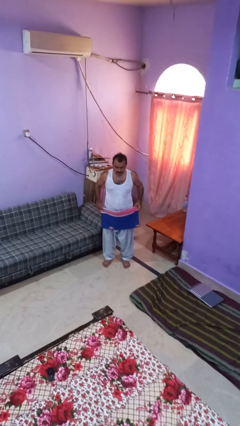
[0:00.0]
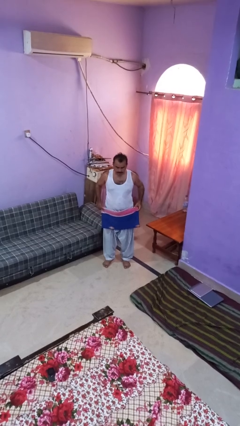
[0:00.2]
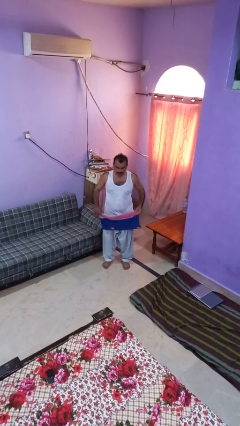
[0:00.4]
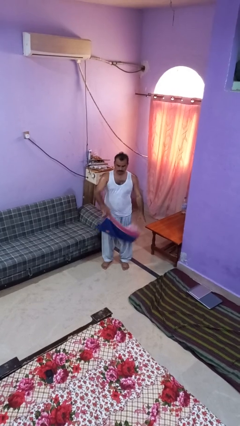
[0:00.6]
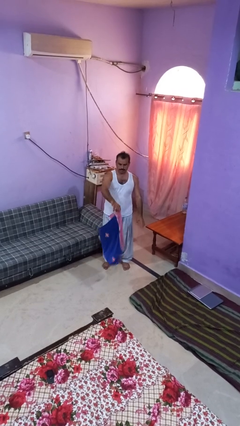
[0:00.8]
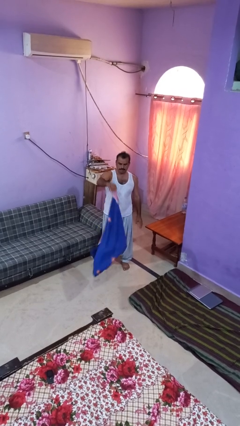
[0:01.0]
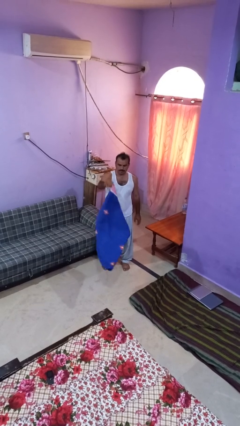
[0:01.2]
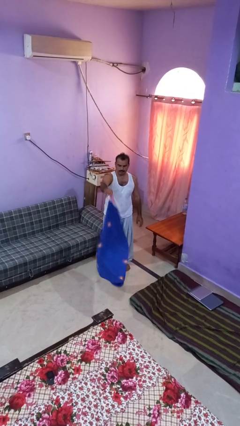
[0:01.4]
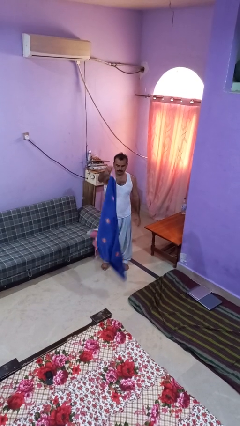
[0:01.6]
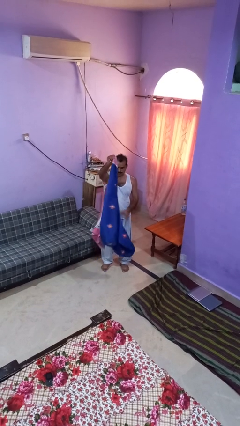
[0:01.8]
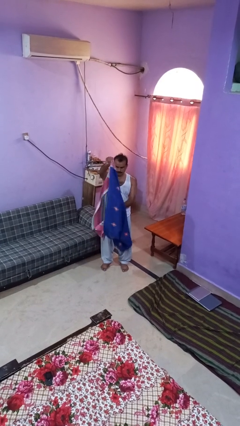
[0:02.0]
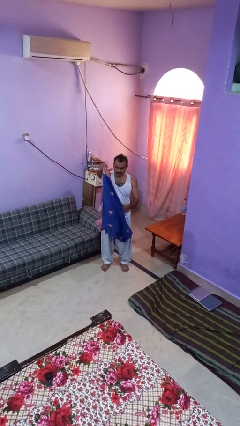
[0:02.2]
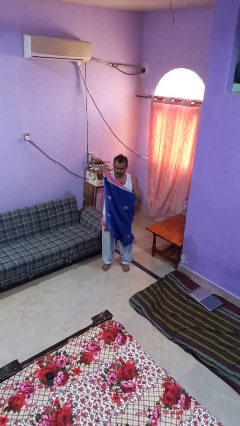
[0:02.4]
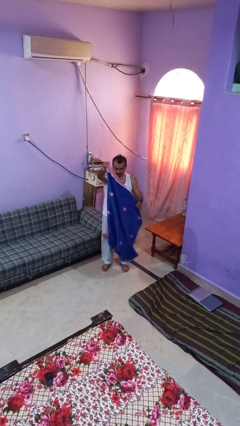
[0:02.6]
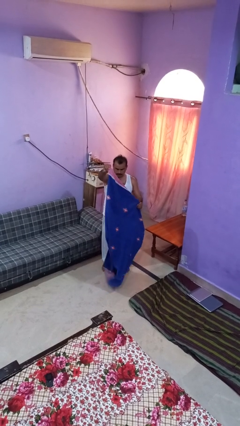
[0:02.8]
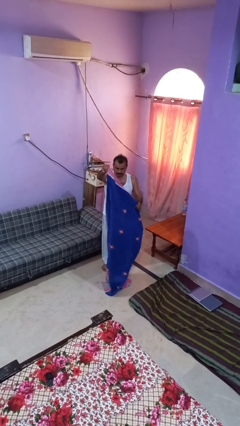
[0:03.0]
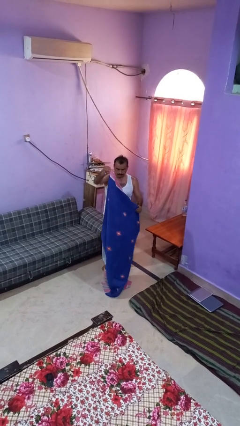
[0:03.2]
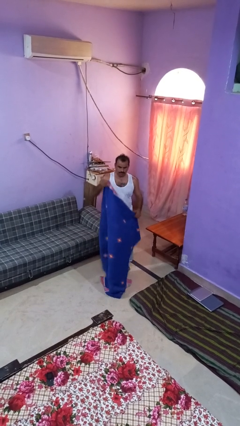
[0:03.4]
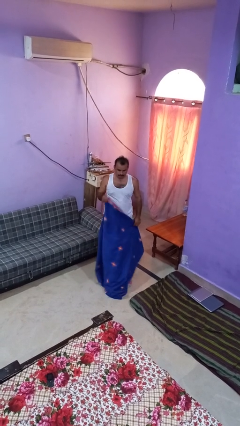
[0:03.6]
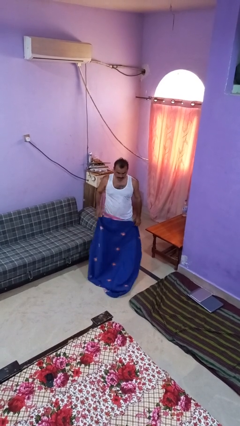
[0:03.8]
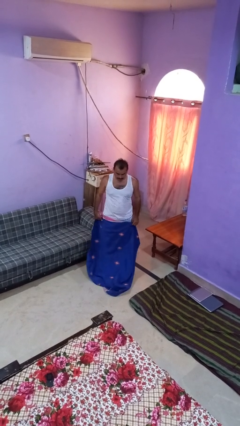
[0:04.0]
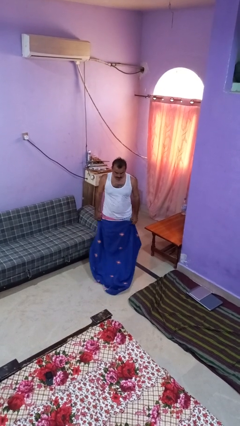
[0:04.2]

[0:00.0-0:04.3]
person unfolds blanket

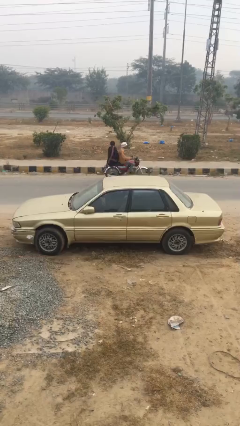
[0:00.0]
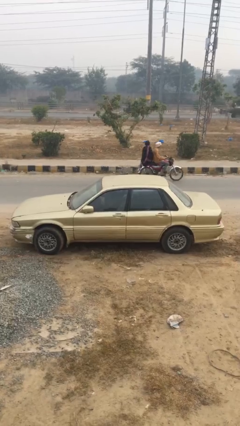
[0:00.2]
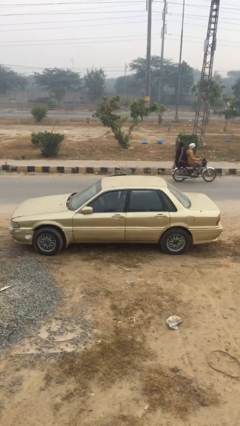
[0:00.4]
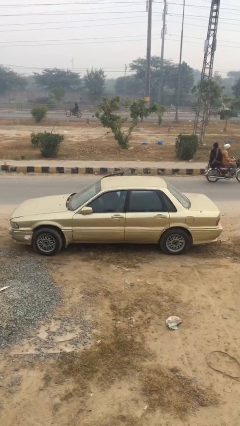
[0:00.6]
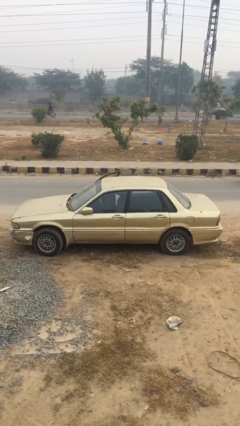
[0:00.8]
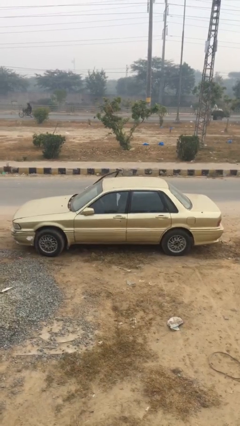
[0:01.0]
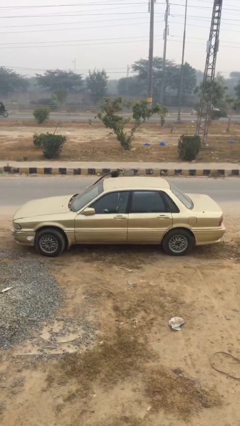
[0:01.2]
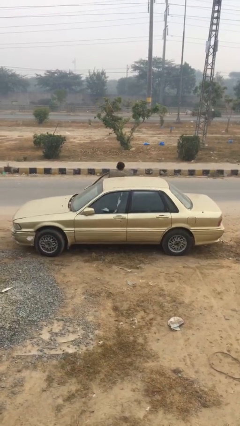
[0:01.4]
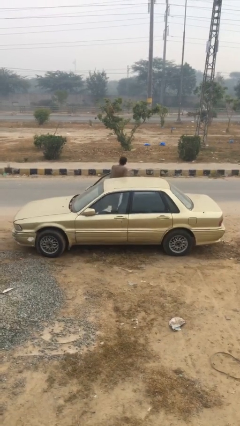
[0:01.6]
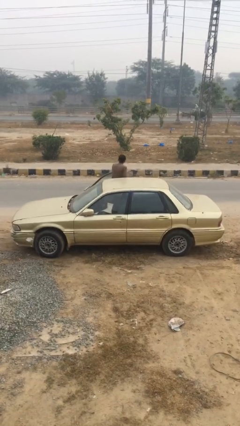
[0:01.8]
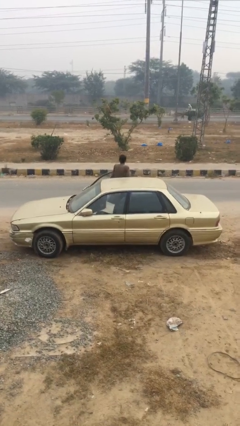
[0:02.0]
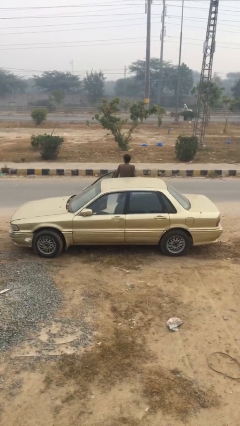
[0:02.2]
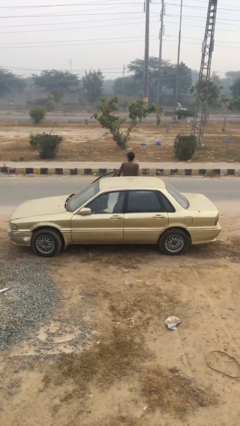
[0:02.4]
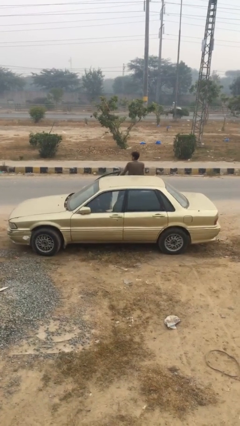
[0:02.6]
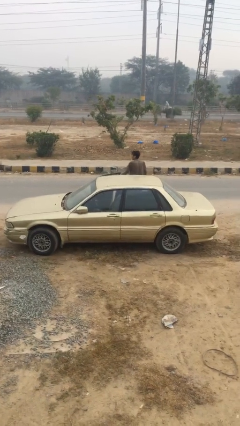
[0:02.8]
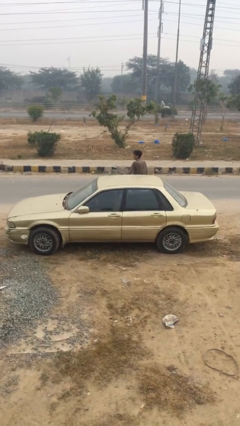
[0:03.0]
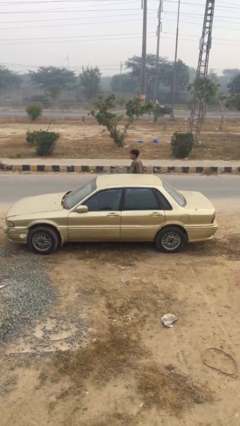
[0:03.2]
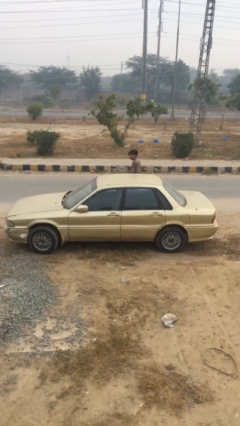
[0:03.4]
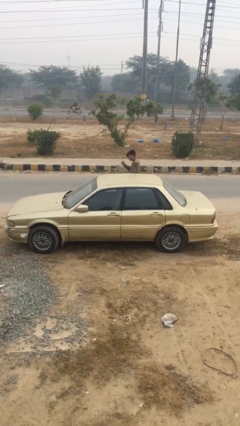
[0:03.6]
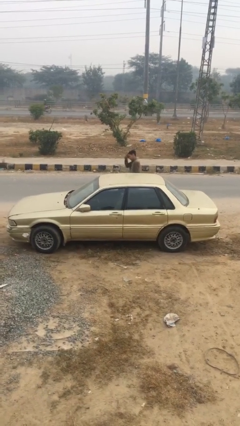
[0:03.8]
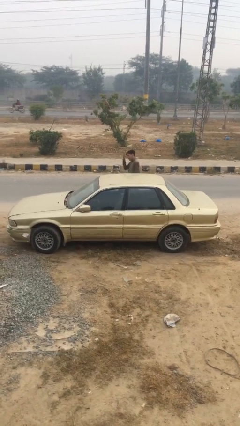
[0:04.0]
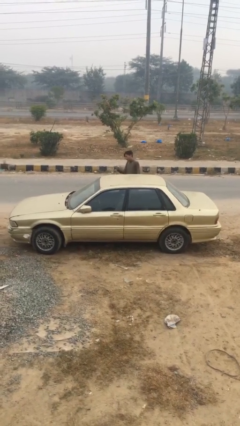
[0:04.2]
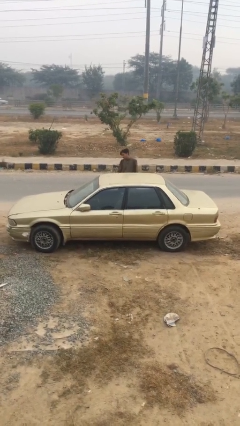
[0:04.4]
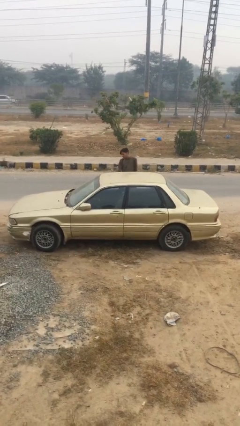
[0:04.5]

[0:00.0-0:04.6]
car drops off person

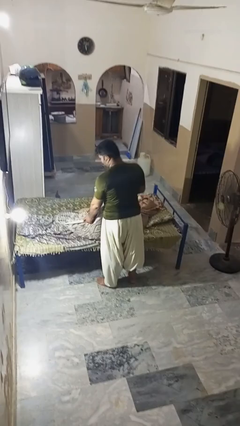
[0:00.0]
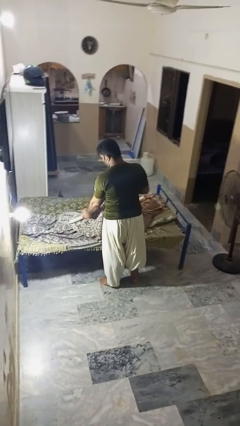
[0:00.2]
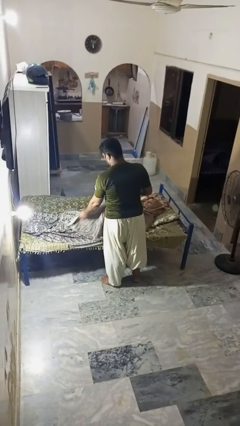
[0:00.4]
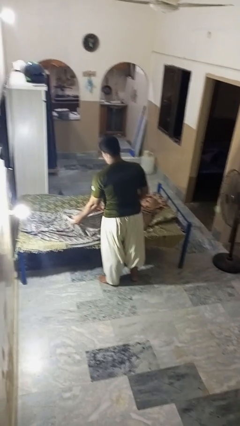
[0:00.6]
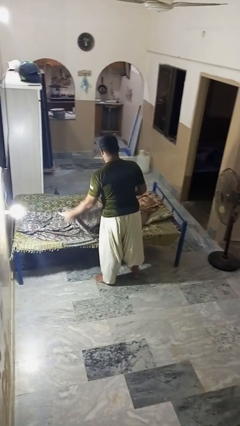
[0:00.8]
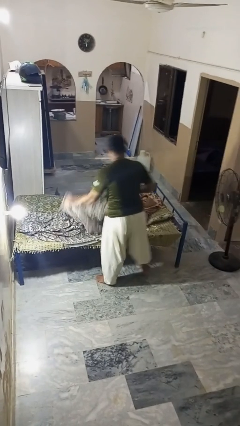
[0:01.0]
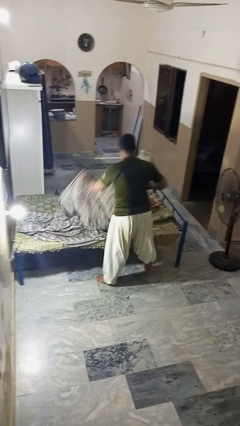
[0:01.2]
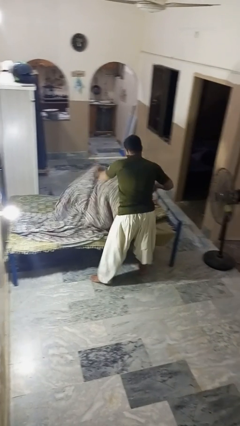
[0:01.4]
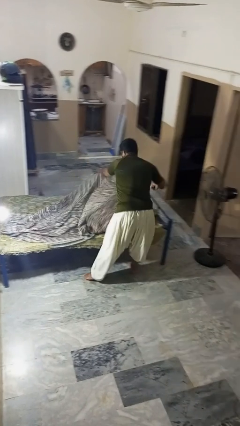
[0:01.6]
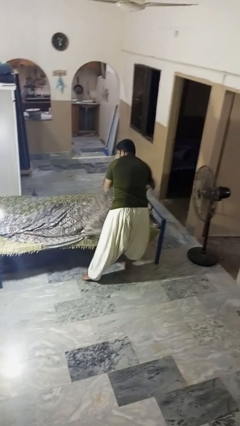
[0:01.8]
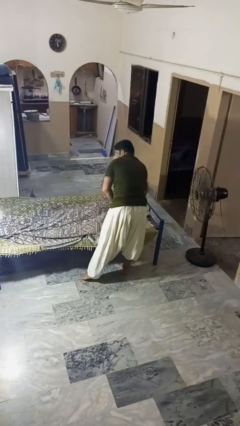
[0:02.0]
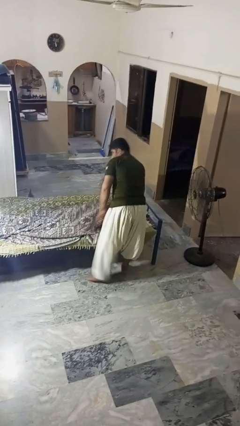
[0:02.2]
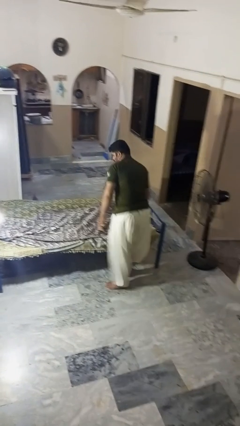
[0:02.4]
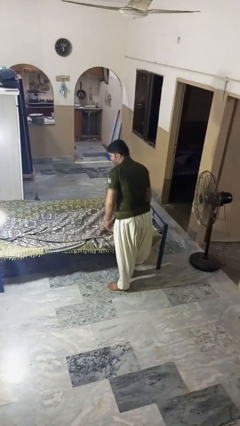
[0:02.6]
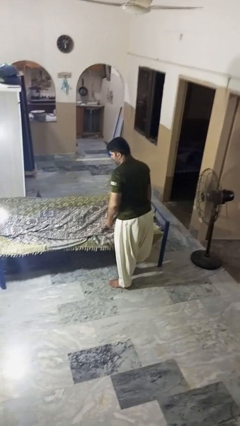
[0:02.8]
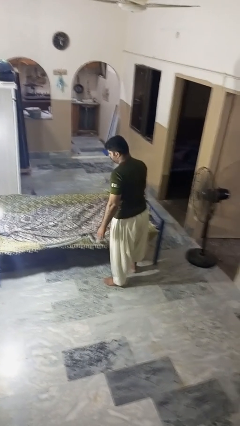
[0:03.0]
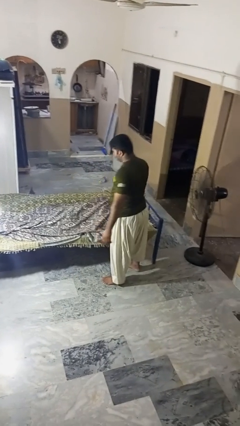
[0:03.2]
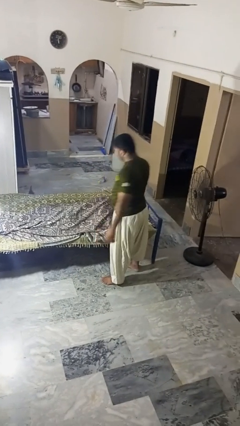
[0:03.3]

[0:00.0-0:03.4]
person covers friend with blanket

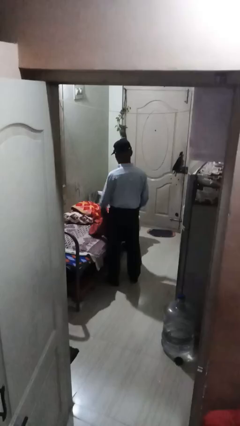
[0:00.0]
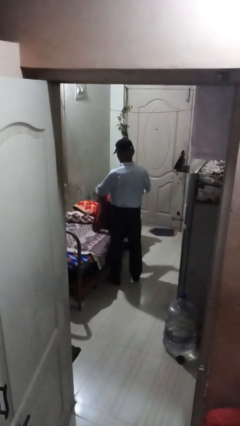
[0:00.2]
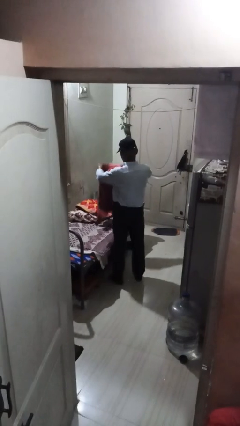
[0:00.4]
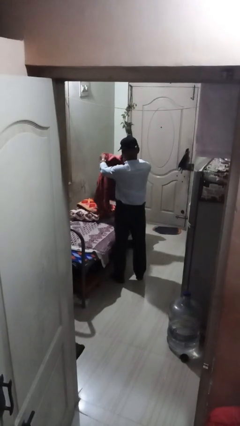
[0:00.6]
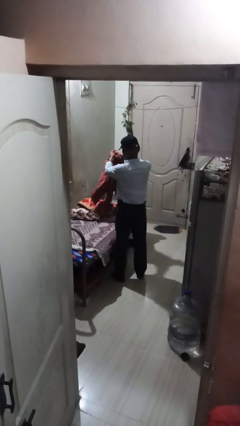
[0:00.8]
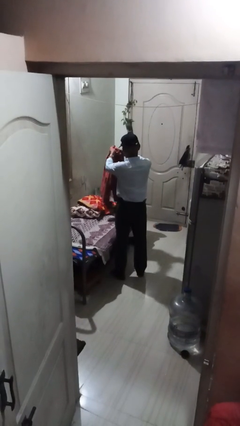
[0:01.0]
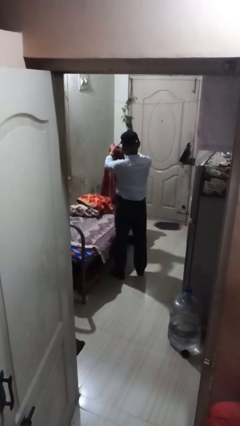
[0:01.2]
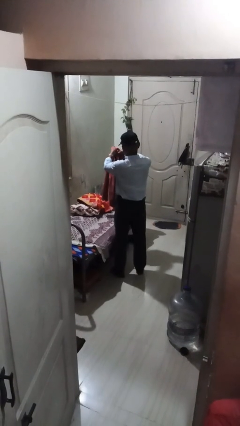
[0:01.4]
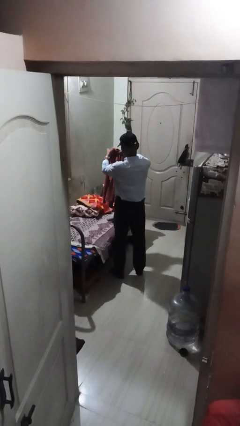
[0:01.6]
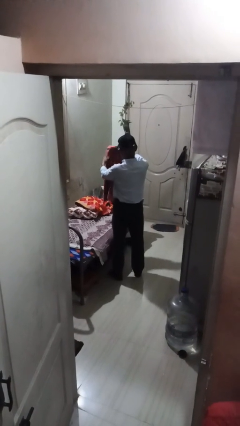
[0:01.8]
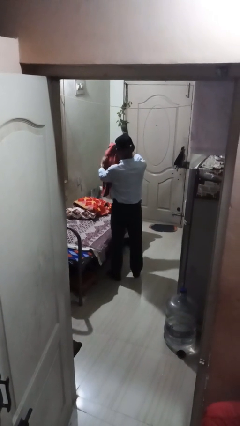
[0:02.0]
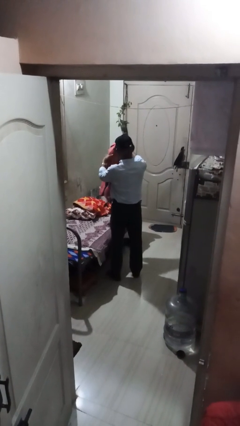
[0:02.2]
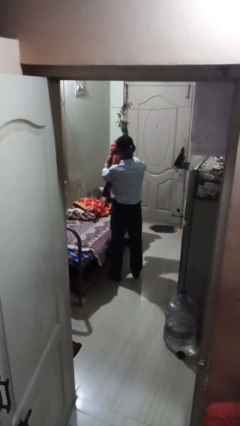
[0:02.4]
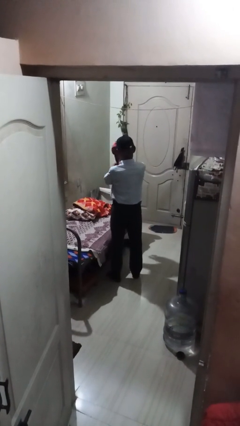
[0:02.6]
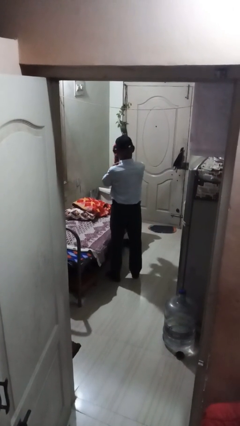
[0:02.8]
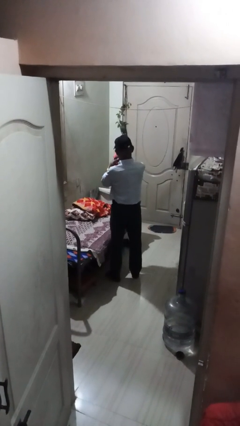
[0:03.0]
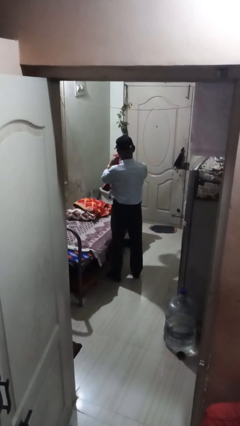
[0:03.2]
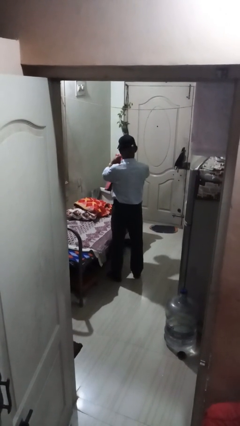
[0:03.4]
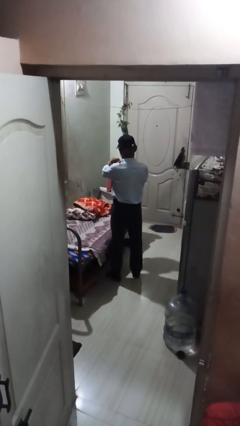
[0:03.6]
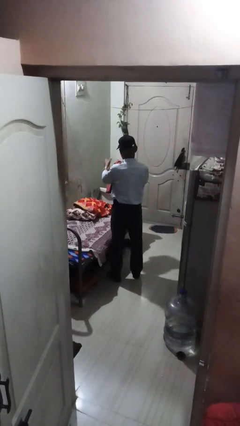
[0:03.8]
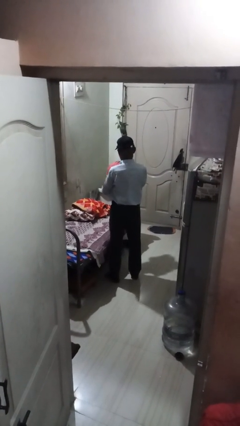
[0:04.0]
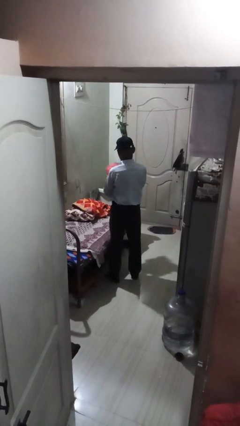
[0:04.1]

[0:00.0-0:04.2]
person folds shirt

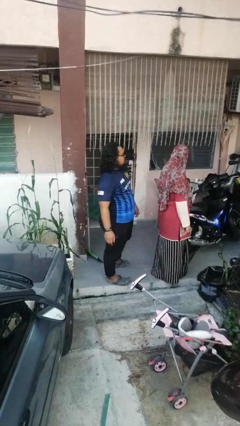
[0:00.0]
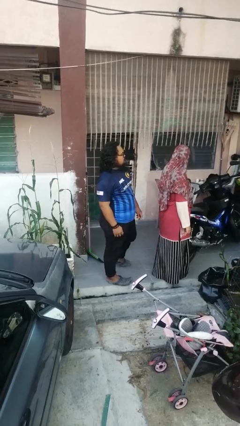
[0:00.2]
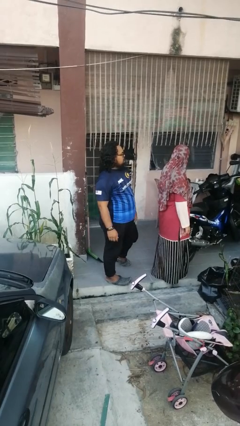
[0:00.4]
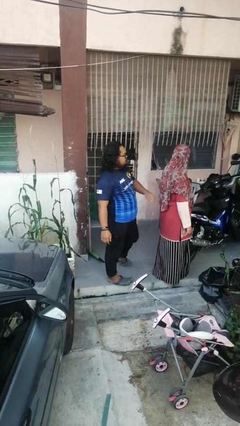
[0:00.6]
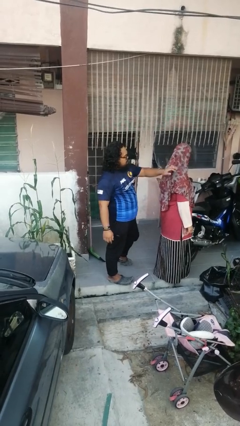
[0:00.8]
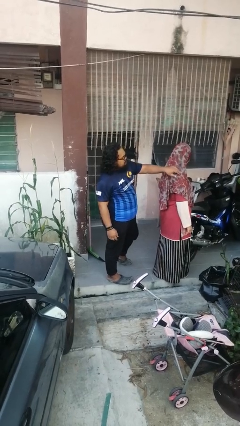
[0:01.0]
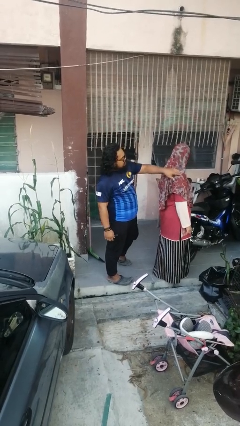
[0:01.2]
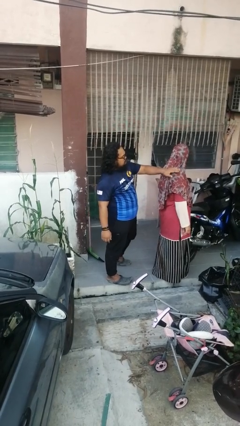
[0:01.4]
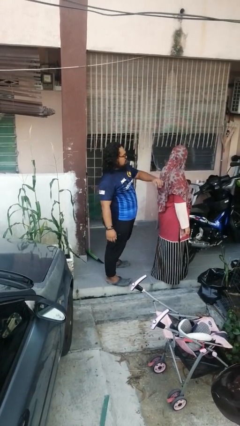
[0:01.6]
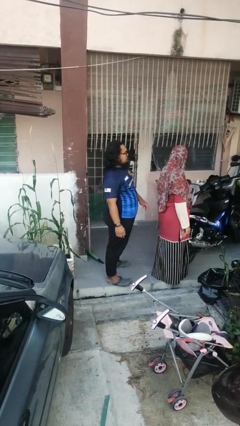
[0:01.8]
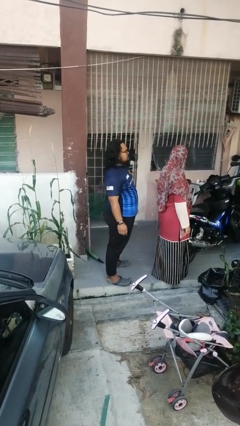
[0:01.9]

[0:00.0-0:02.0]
person touches back of person
